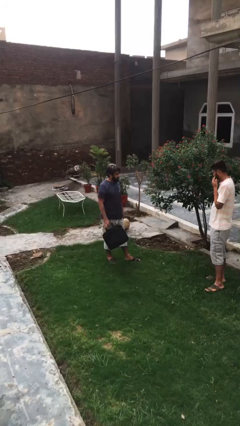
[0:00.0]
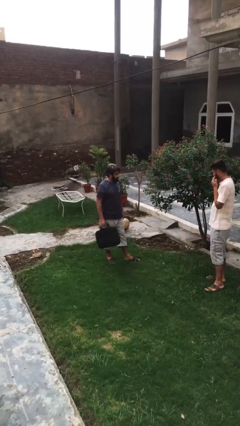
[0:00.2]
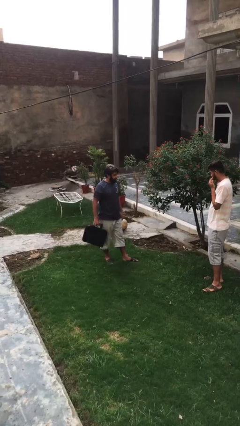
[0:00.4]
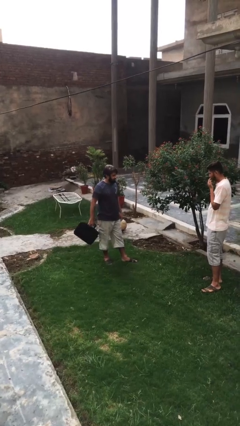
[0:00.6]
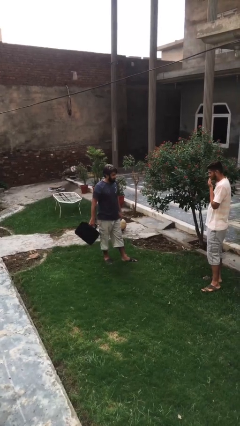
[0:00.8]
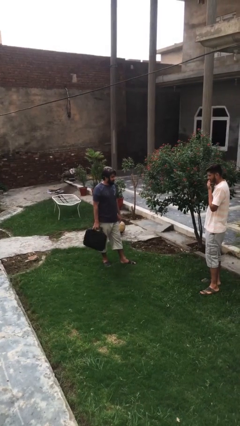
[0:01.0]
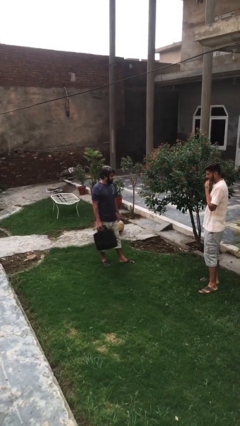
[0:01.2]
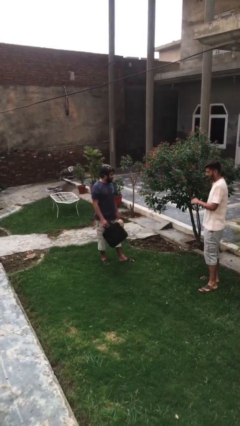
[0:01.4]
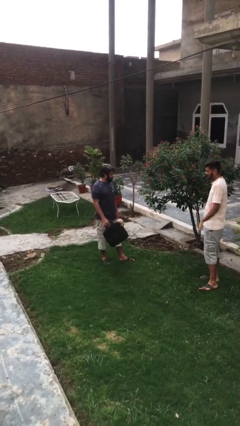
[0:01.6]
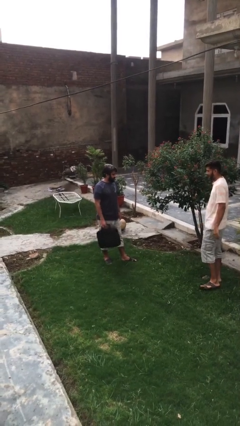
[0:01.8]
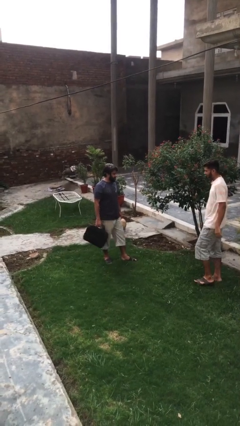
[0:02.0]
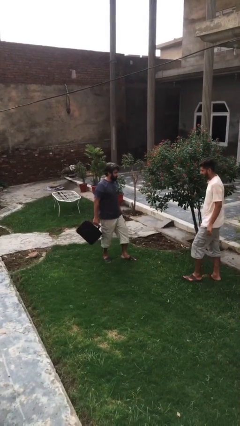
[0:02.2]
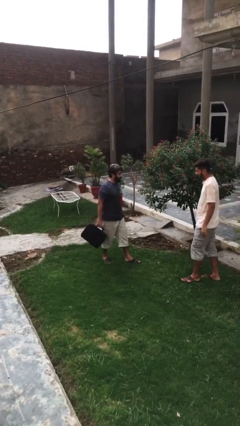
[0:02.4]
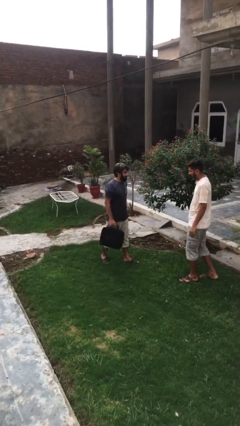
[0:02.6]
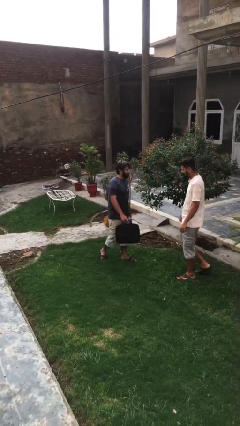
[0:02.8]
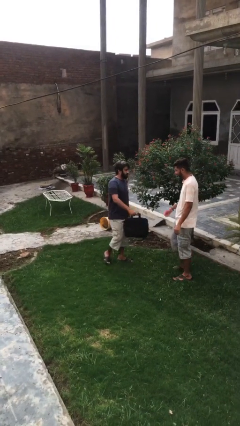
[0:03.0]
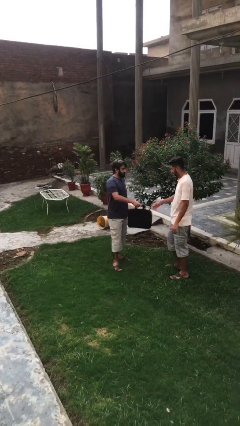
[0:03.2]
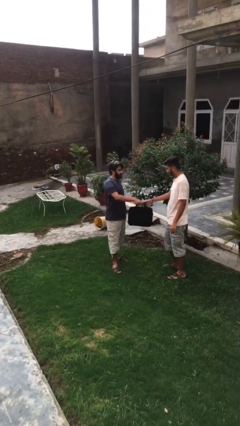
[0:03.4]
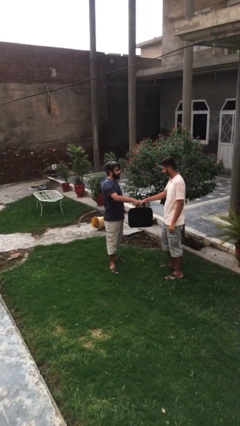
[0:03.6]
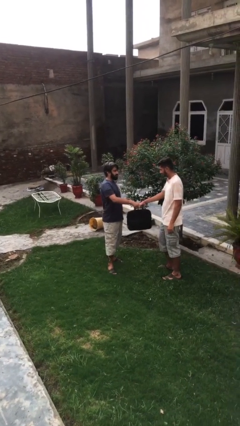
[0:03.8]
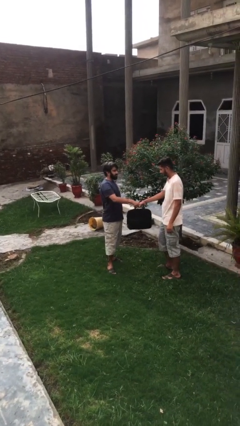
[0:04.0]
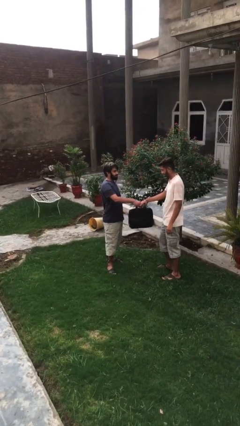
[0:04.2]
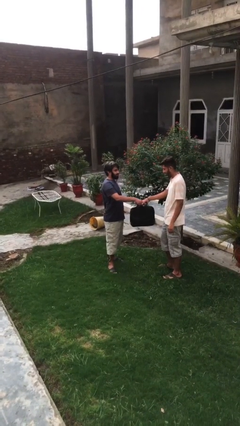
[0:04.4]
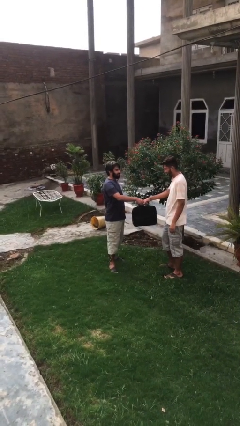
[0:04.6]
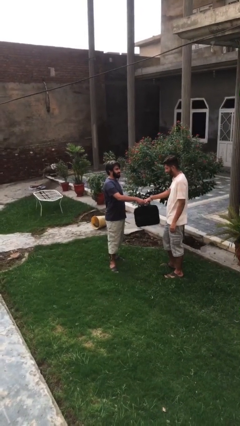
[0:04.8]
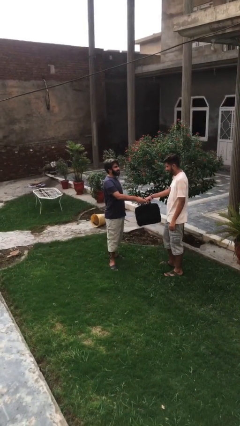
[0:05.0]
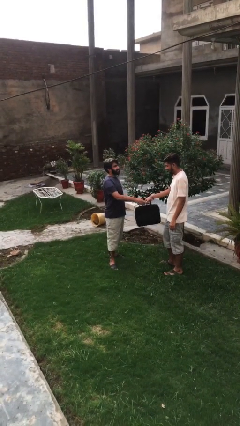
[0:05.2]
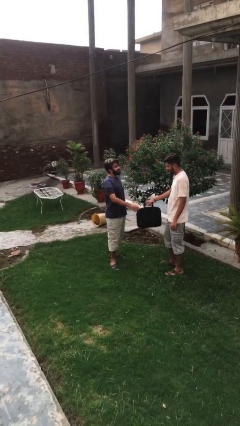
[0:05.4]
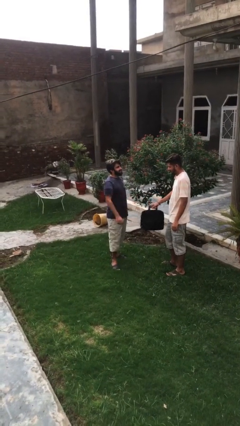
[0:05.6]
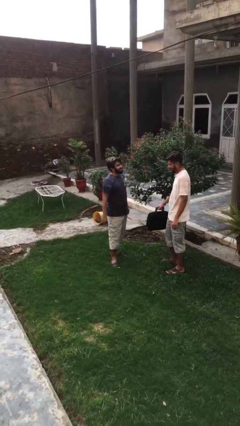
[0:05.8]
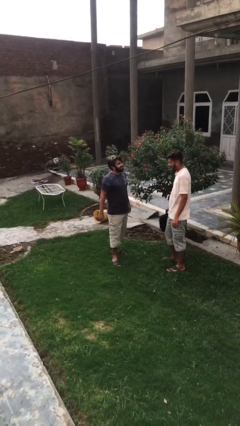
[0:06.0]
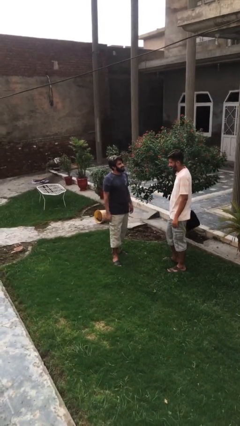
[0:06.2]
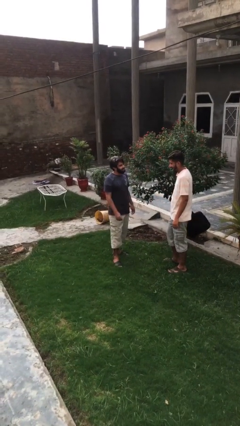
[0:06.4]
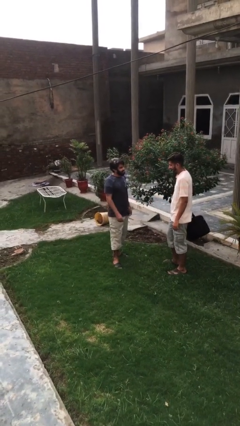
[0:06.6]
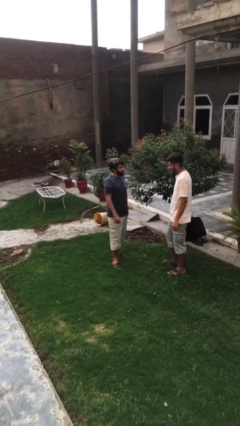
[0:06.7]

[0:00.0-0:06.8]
person transfers object to person

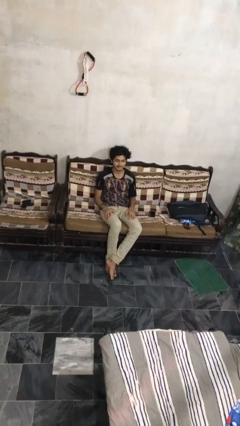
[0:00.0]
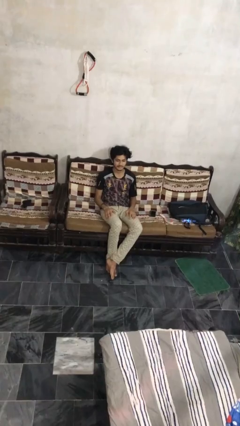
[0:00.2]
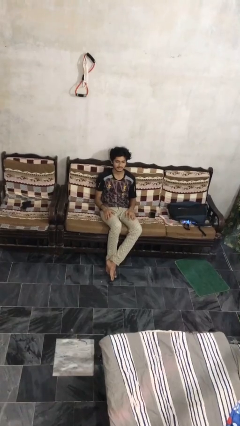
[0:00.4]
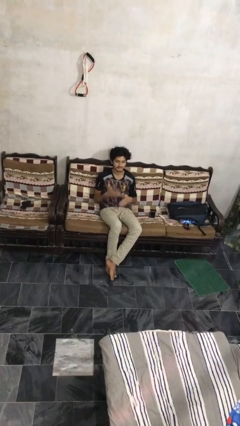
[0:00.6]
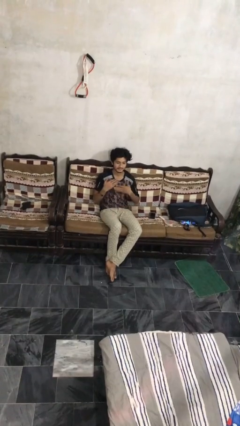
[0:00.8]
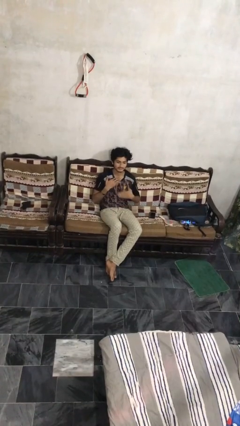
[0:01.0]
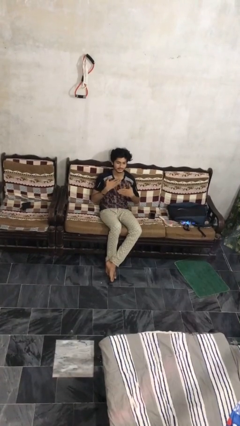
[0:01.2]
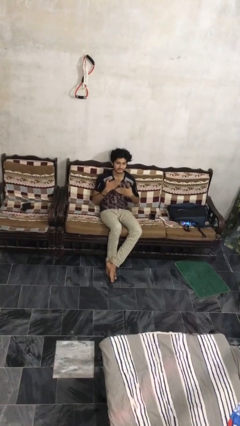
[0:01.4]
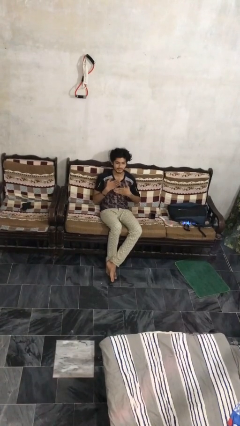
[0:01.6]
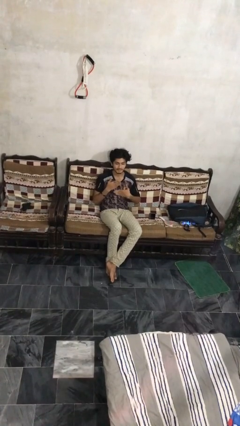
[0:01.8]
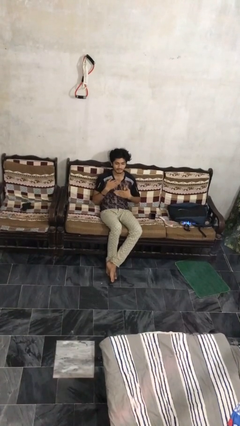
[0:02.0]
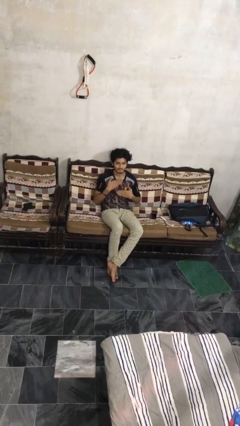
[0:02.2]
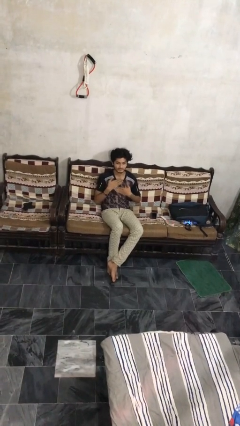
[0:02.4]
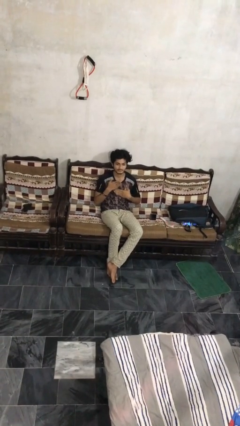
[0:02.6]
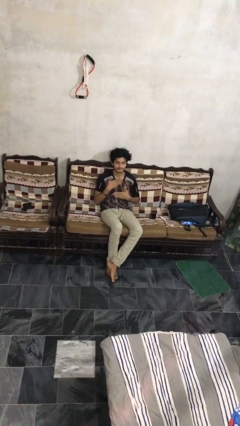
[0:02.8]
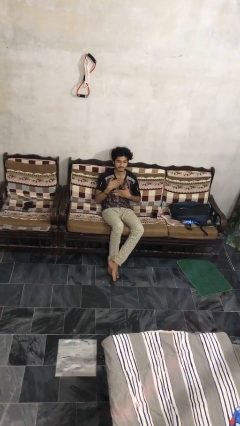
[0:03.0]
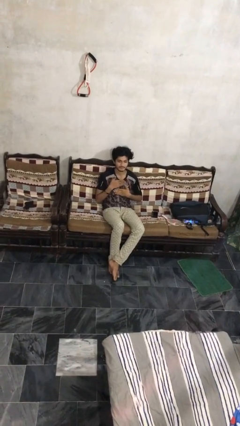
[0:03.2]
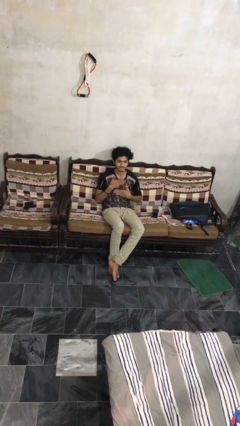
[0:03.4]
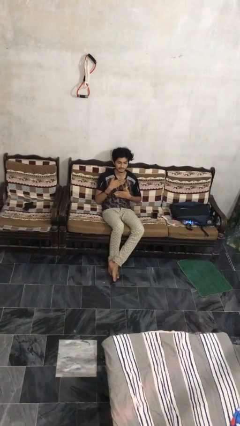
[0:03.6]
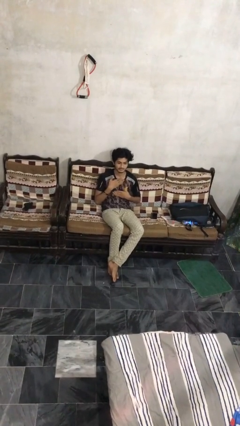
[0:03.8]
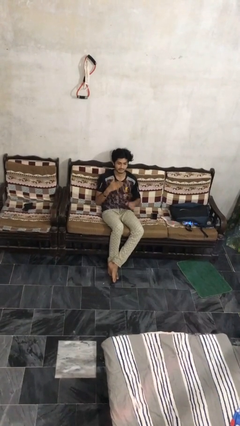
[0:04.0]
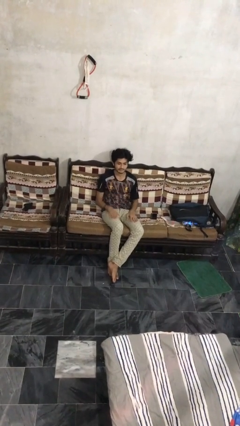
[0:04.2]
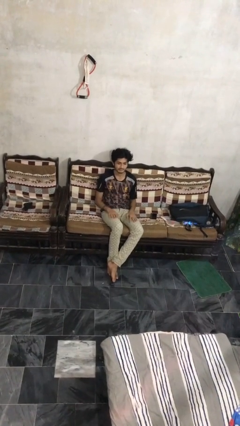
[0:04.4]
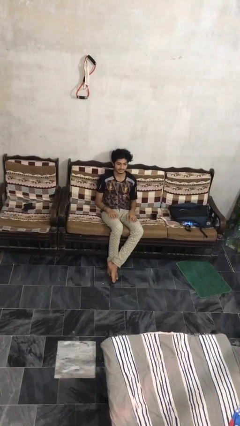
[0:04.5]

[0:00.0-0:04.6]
person drums on chest

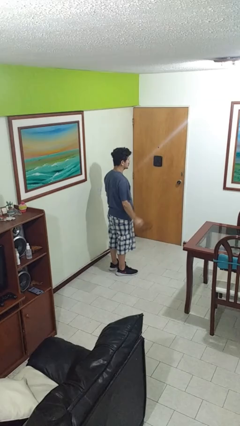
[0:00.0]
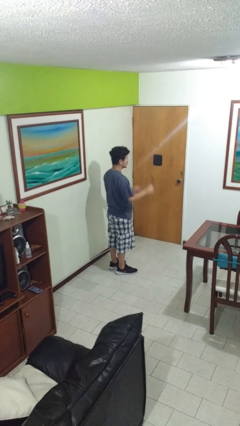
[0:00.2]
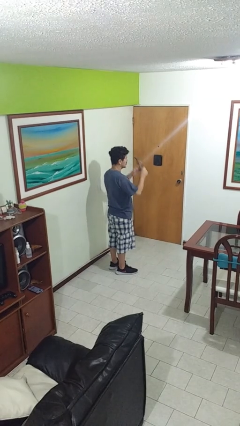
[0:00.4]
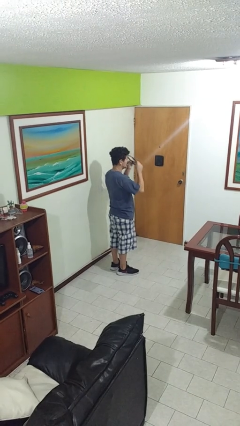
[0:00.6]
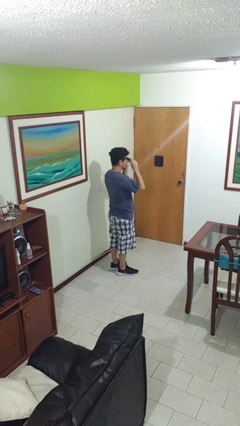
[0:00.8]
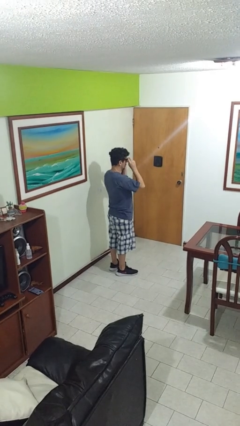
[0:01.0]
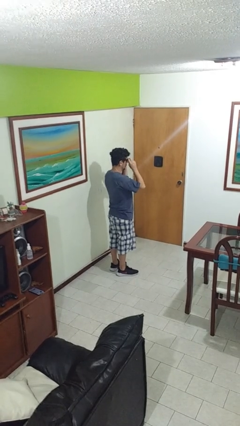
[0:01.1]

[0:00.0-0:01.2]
person puts on sunglasses

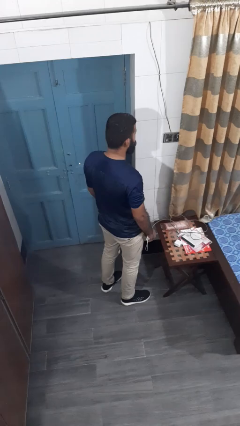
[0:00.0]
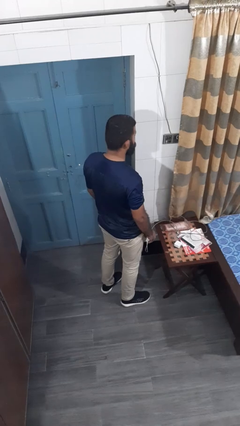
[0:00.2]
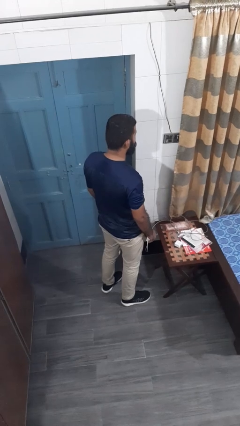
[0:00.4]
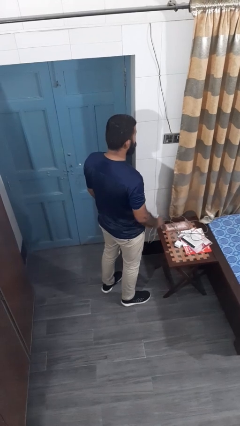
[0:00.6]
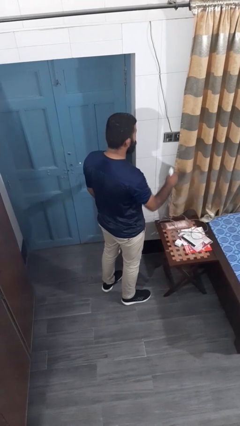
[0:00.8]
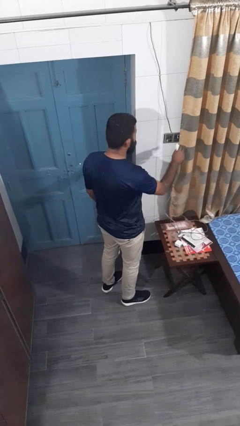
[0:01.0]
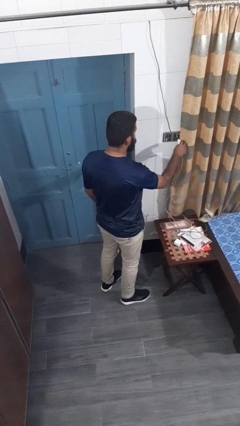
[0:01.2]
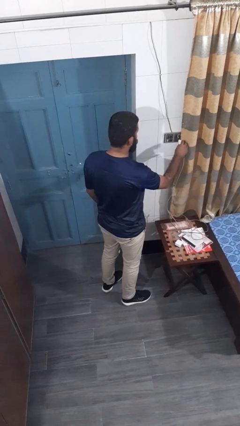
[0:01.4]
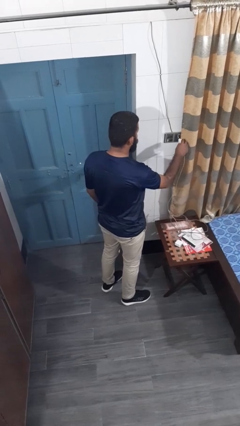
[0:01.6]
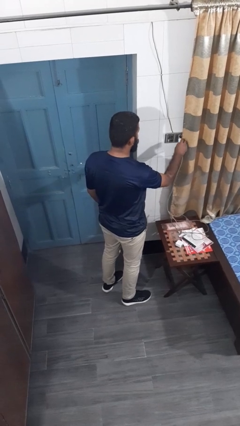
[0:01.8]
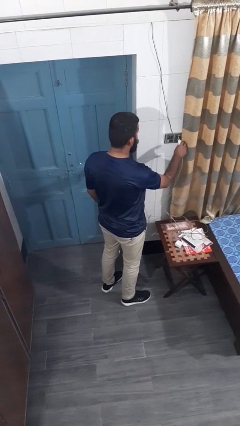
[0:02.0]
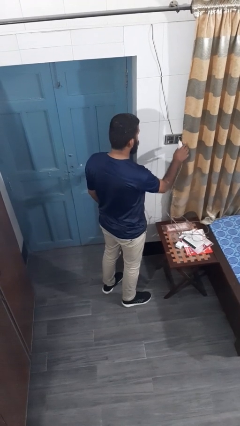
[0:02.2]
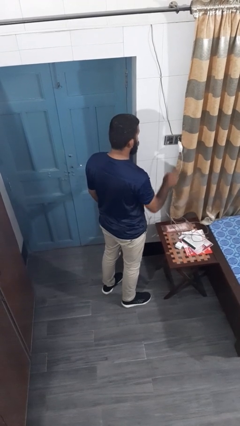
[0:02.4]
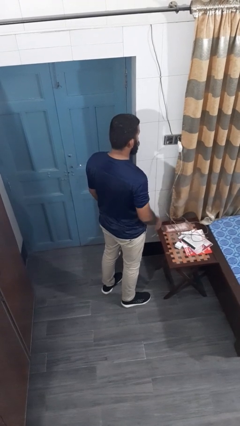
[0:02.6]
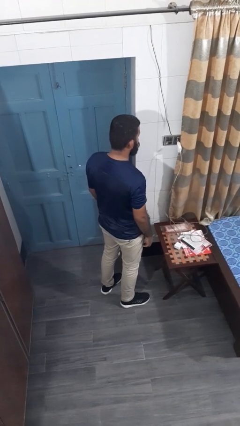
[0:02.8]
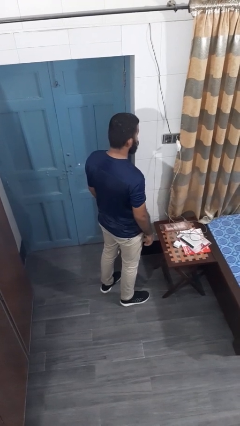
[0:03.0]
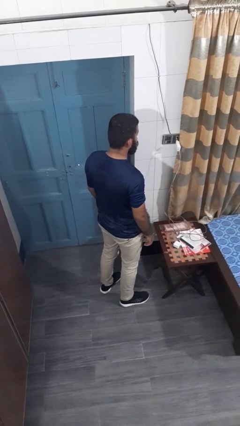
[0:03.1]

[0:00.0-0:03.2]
person plugs into electrical socket

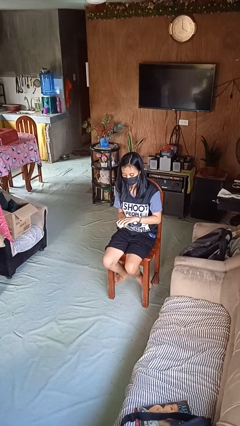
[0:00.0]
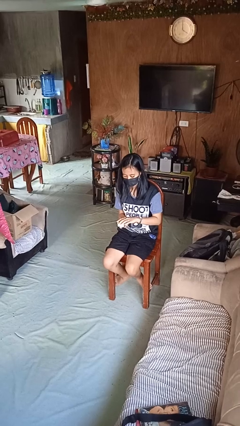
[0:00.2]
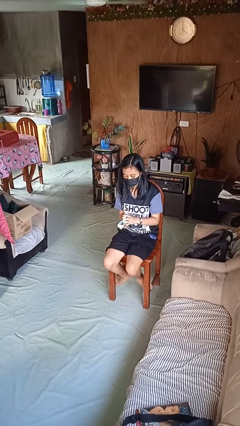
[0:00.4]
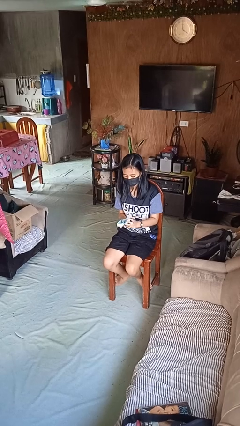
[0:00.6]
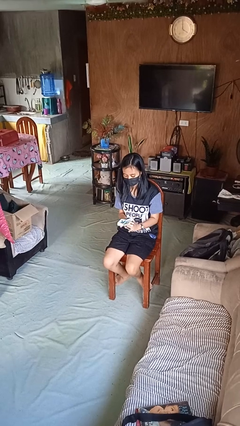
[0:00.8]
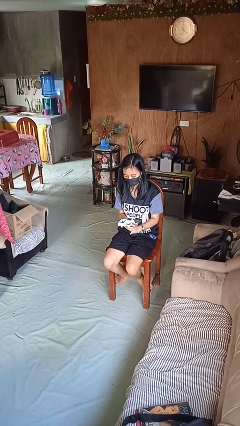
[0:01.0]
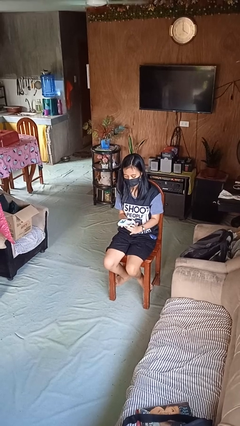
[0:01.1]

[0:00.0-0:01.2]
person opens jewelry box

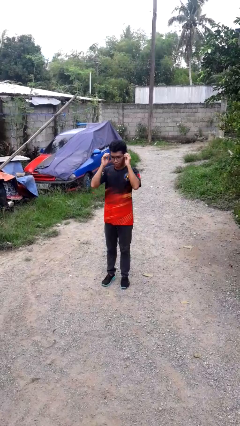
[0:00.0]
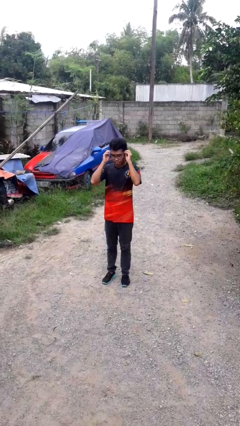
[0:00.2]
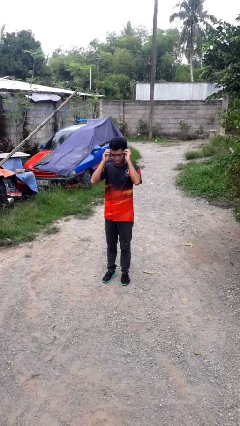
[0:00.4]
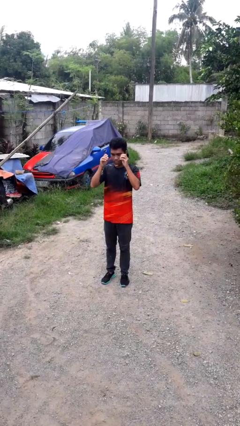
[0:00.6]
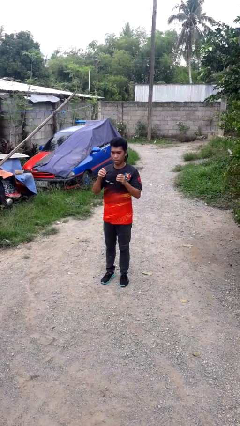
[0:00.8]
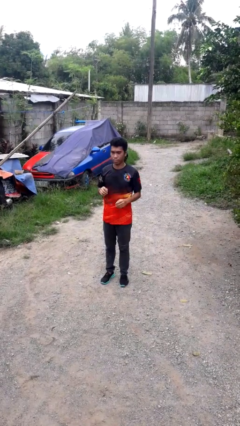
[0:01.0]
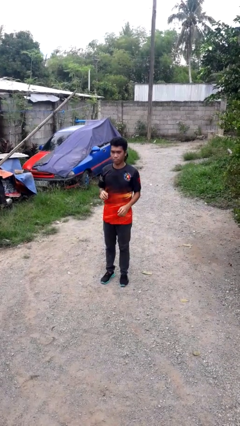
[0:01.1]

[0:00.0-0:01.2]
person takes off glasses
